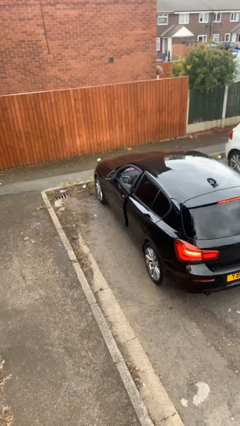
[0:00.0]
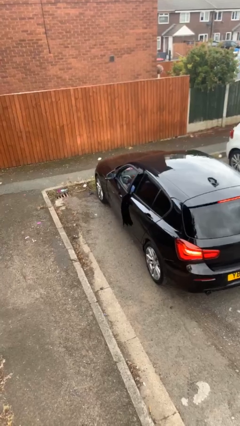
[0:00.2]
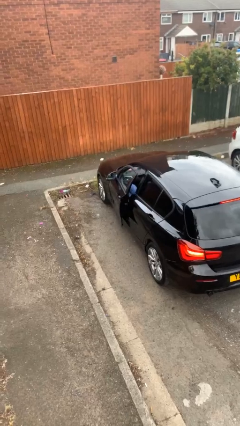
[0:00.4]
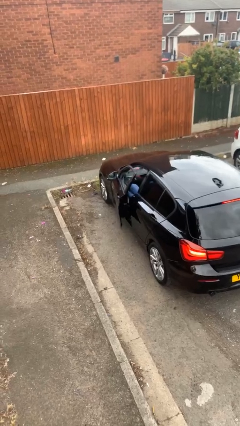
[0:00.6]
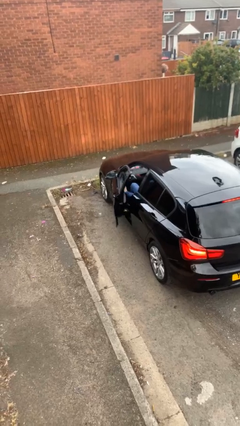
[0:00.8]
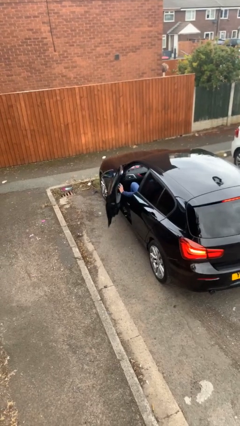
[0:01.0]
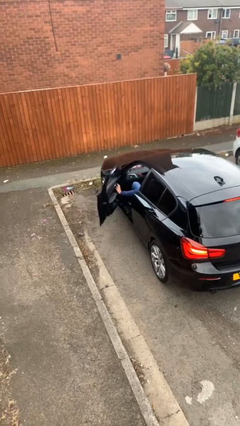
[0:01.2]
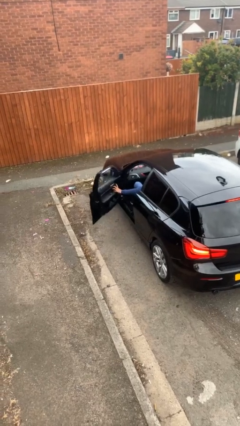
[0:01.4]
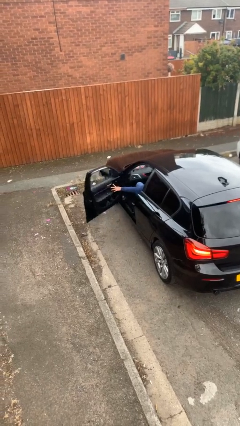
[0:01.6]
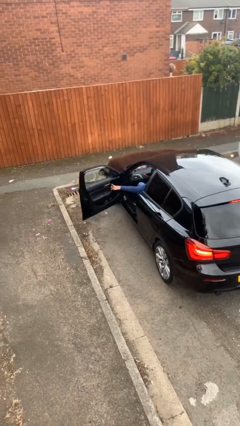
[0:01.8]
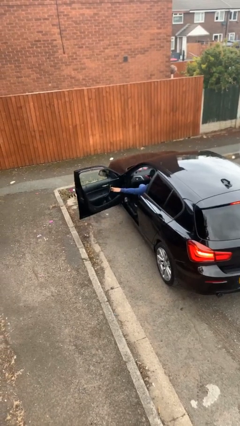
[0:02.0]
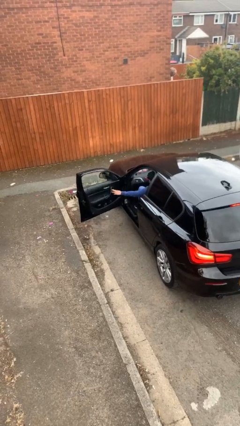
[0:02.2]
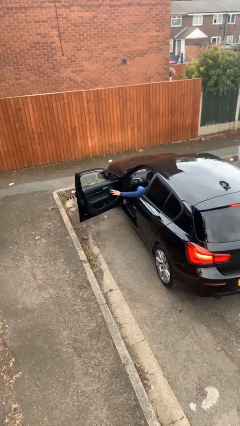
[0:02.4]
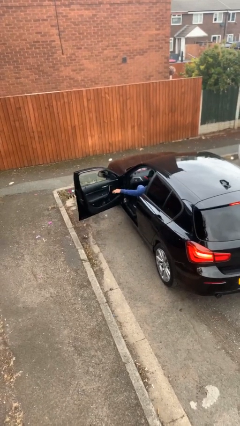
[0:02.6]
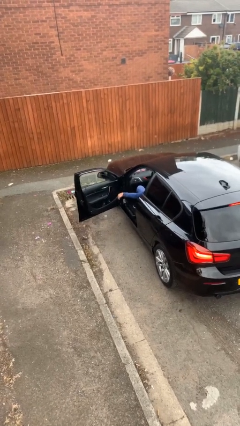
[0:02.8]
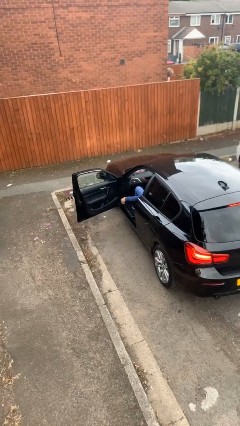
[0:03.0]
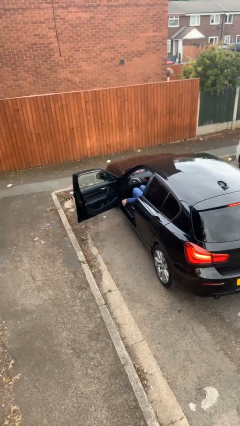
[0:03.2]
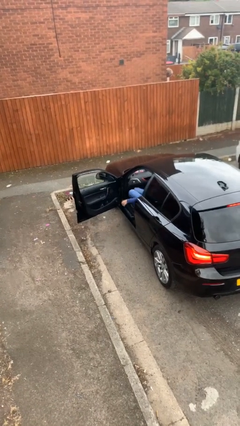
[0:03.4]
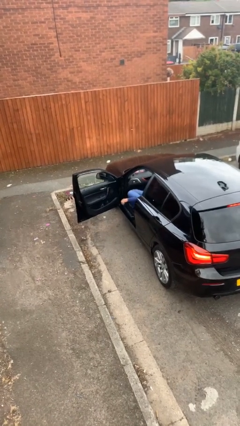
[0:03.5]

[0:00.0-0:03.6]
person opens car door

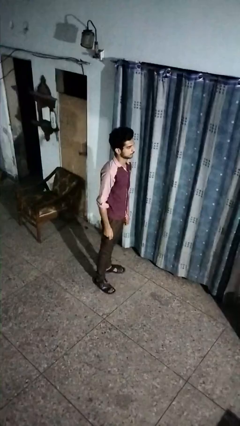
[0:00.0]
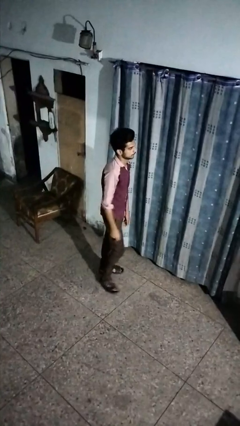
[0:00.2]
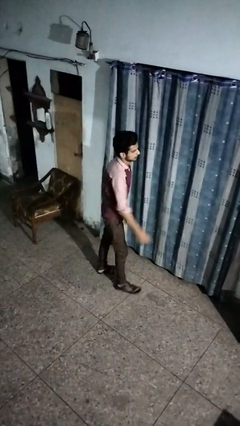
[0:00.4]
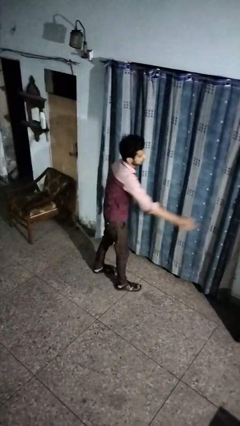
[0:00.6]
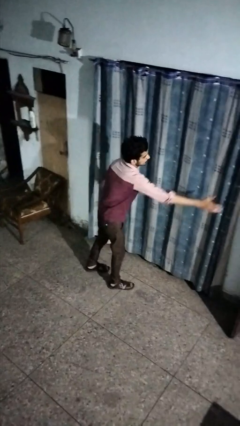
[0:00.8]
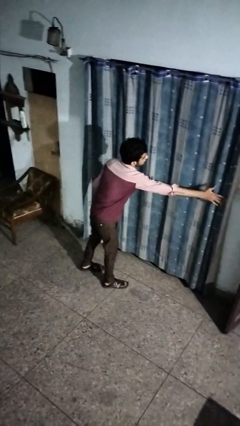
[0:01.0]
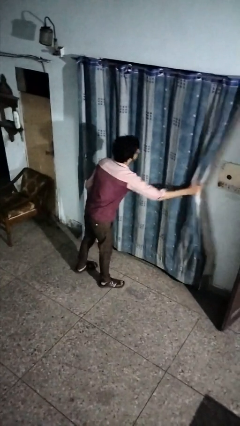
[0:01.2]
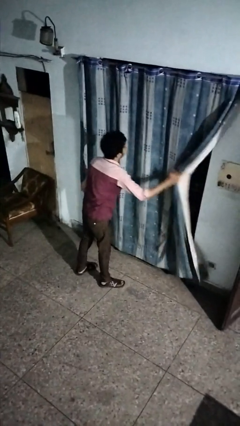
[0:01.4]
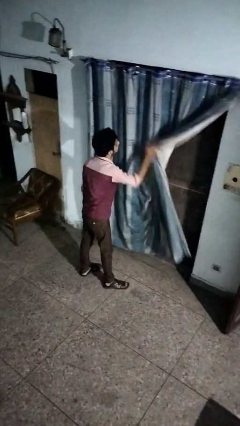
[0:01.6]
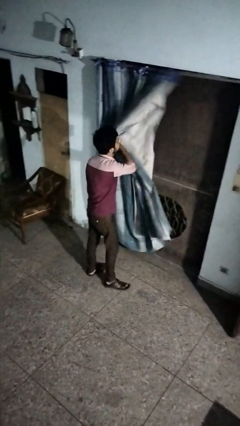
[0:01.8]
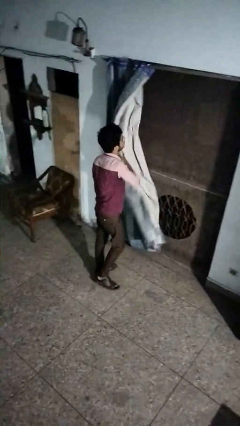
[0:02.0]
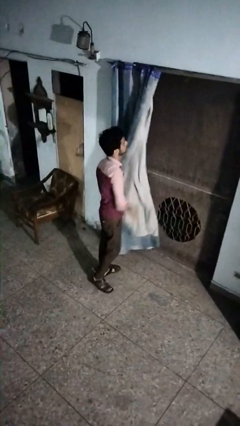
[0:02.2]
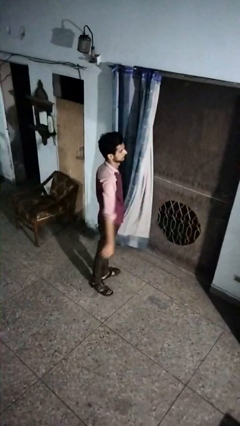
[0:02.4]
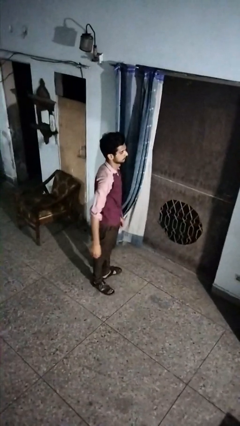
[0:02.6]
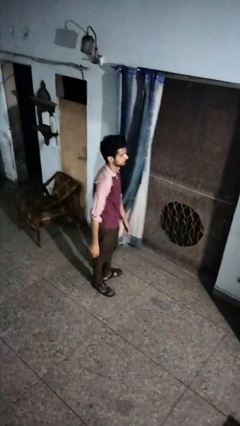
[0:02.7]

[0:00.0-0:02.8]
person opens curtains

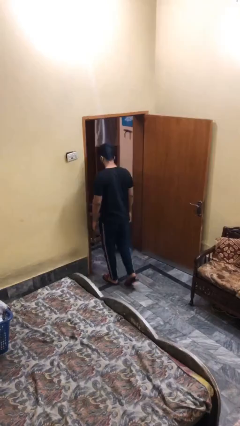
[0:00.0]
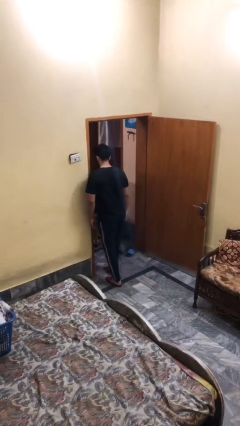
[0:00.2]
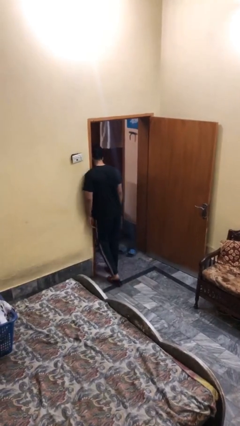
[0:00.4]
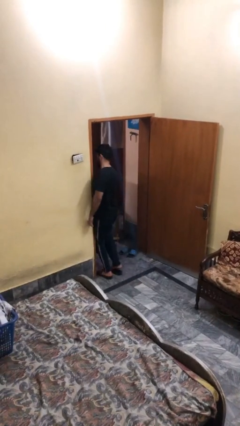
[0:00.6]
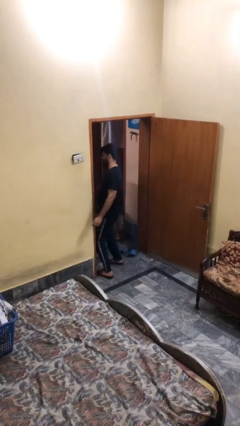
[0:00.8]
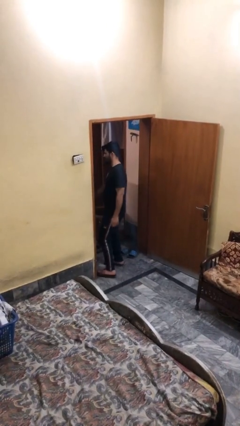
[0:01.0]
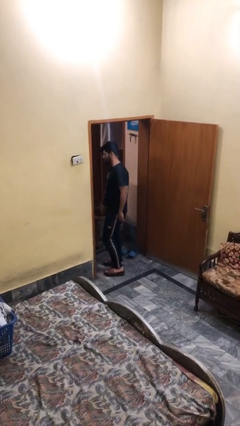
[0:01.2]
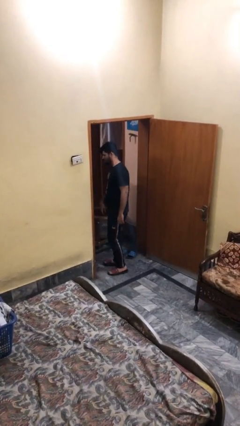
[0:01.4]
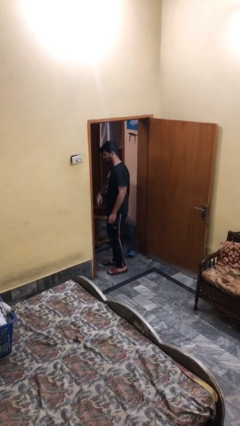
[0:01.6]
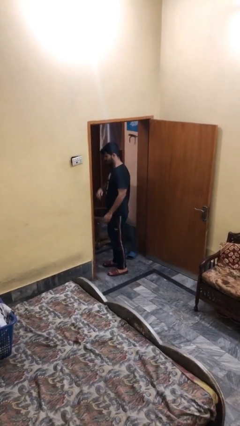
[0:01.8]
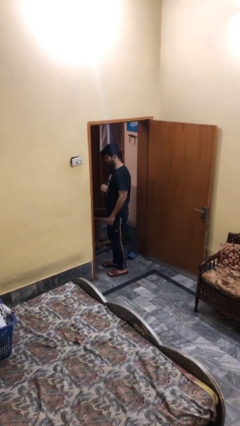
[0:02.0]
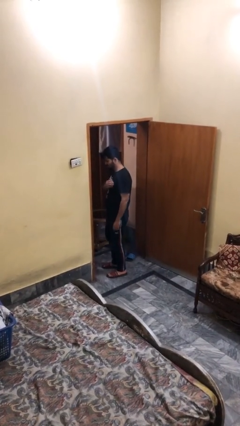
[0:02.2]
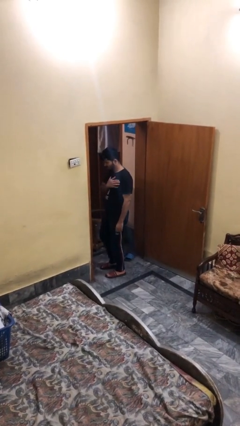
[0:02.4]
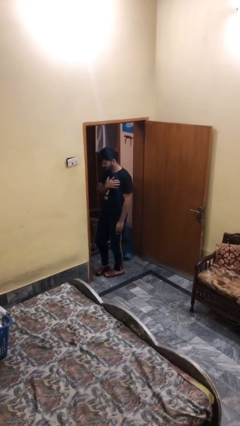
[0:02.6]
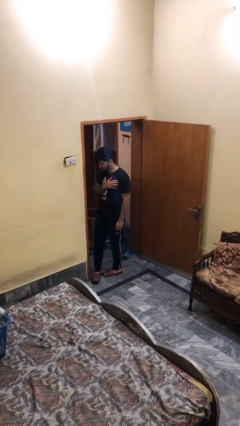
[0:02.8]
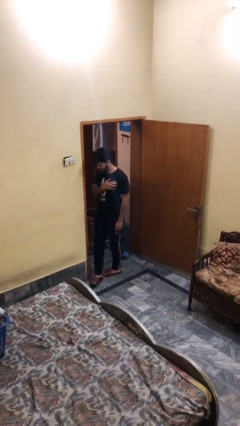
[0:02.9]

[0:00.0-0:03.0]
person bumps into wall

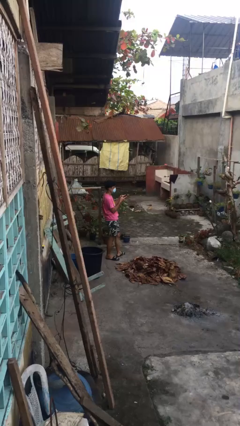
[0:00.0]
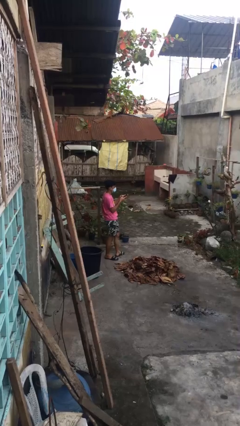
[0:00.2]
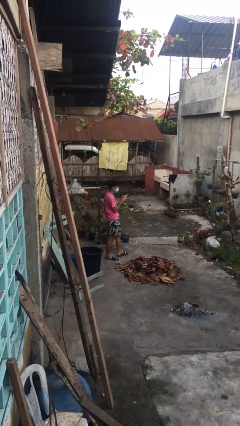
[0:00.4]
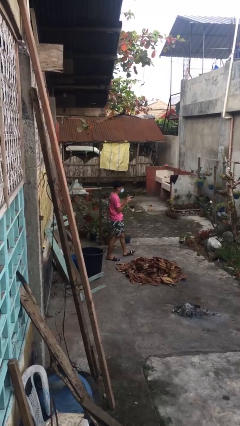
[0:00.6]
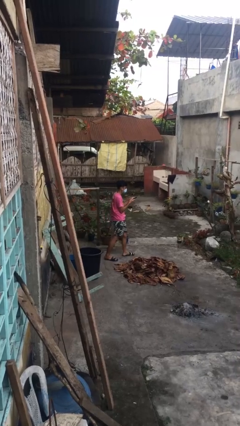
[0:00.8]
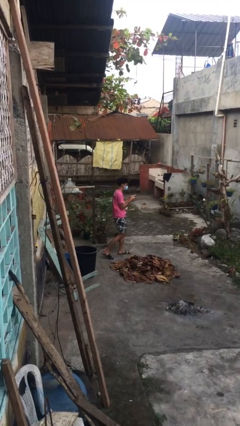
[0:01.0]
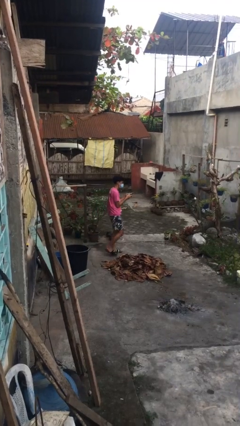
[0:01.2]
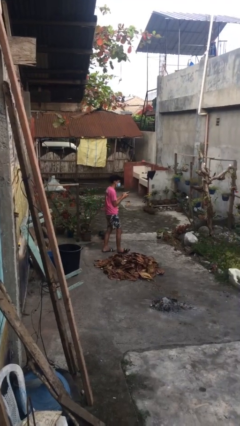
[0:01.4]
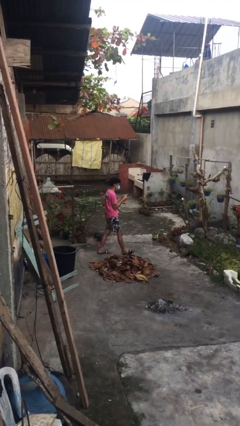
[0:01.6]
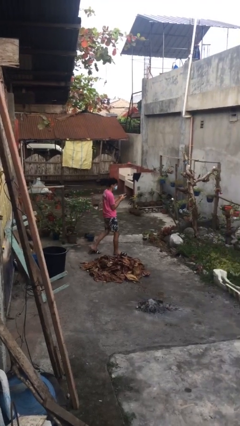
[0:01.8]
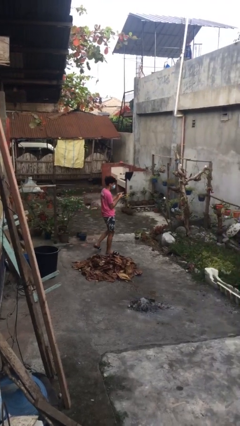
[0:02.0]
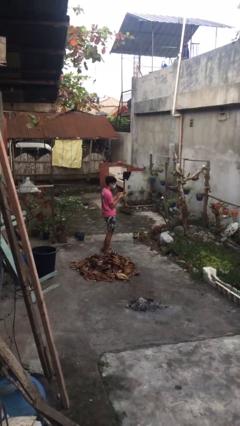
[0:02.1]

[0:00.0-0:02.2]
person texts on phone

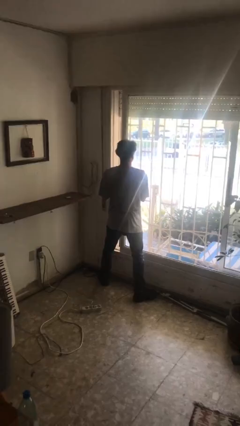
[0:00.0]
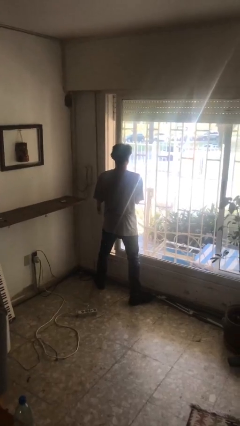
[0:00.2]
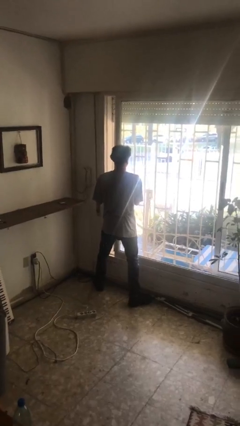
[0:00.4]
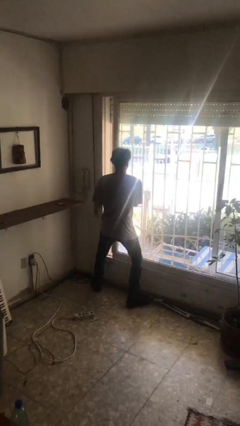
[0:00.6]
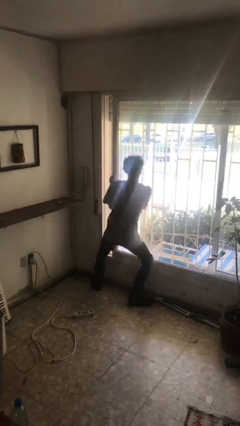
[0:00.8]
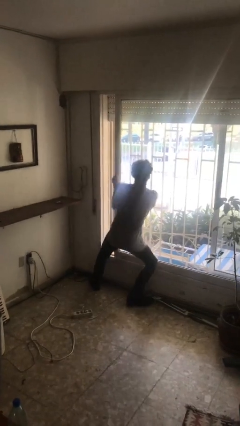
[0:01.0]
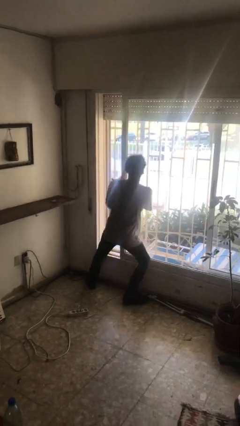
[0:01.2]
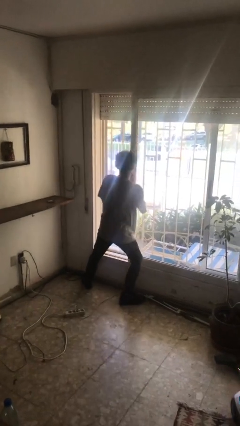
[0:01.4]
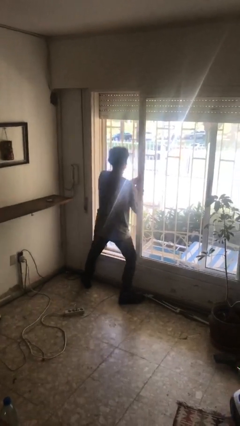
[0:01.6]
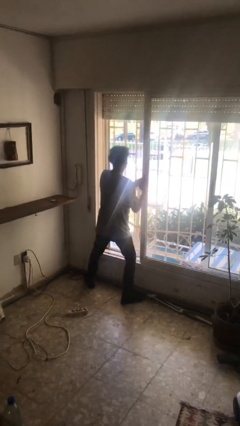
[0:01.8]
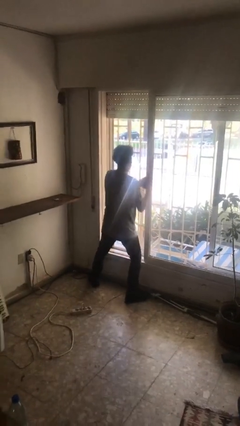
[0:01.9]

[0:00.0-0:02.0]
person opens sliding door

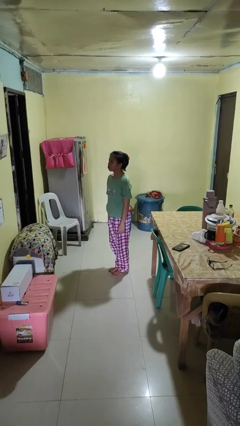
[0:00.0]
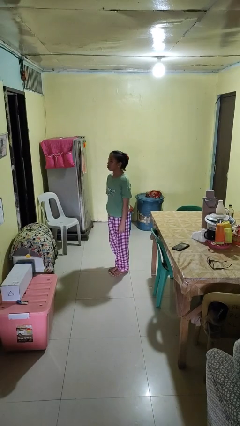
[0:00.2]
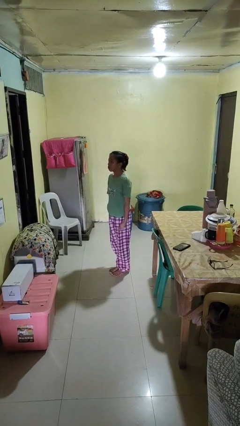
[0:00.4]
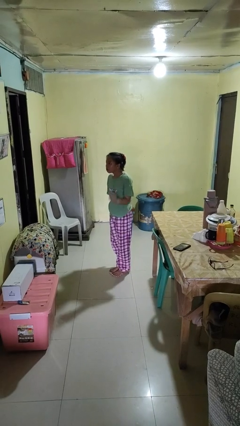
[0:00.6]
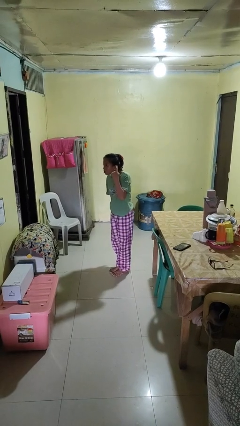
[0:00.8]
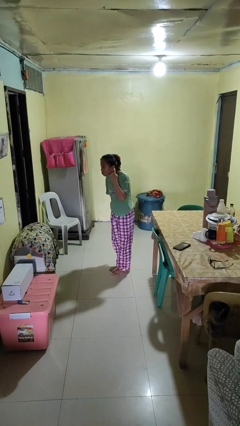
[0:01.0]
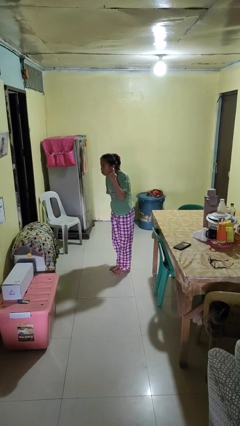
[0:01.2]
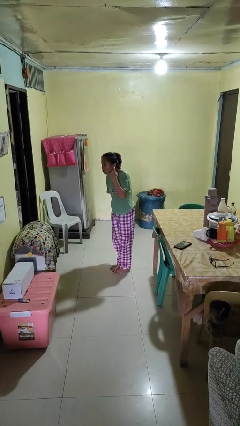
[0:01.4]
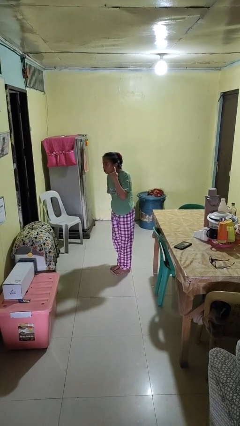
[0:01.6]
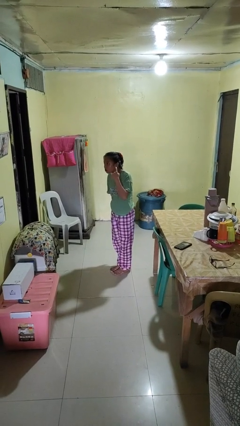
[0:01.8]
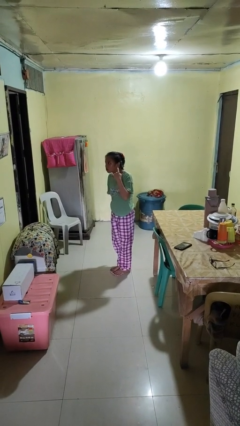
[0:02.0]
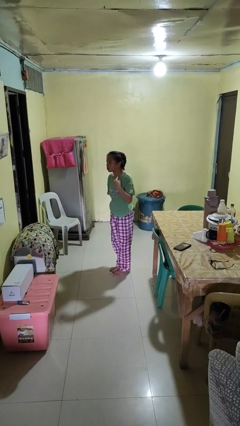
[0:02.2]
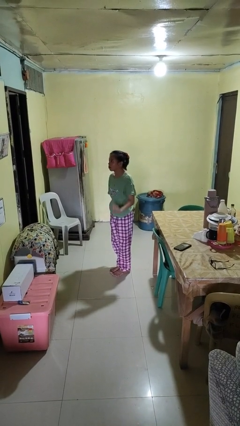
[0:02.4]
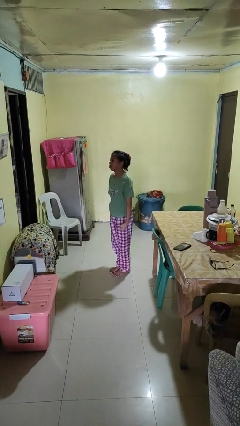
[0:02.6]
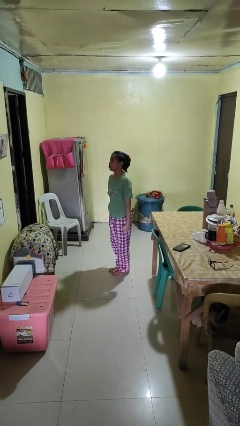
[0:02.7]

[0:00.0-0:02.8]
person gestures listen closely

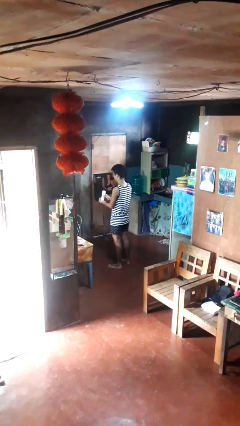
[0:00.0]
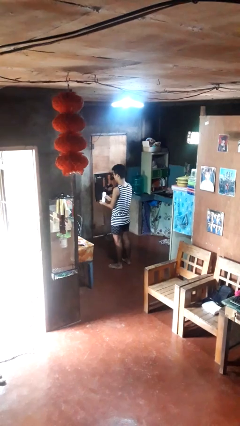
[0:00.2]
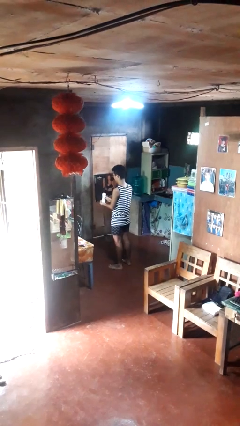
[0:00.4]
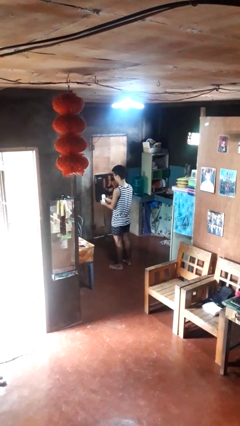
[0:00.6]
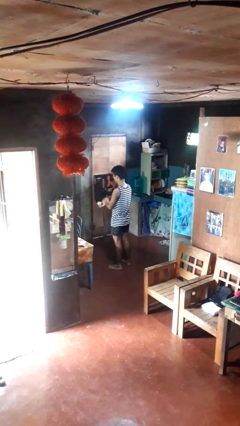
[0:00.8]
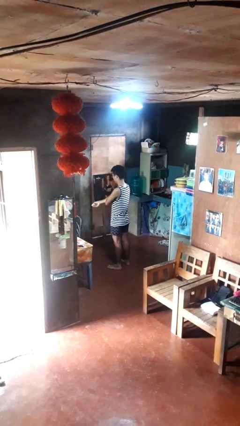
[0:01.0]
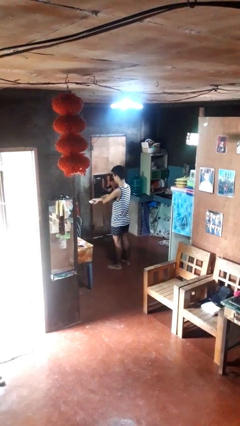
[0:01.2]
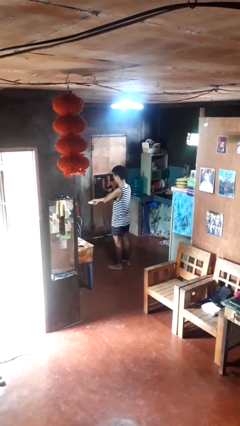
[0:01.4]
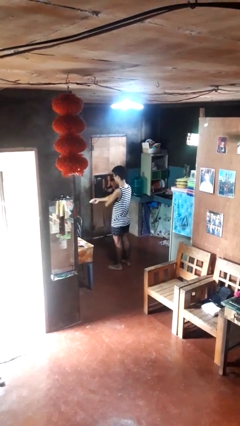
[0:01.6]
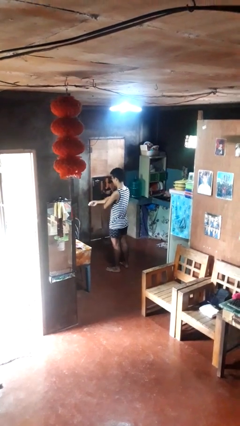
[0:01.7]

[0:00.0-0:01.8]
person applies sunscreen
